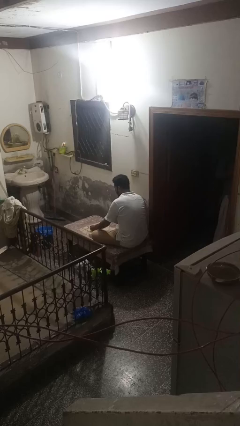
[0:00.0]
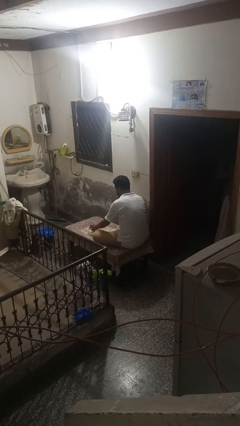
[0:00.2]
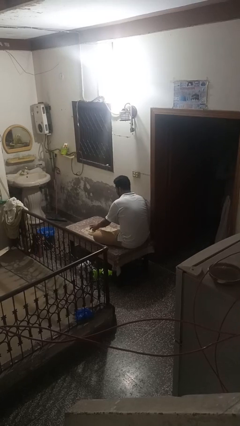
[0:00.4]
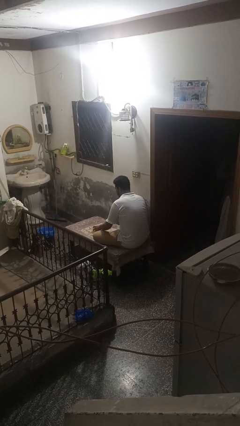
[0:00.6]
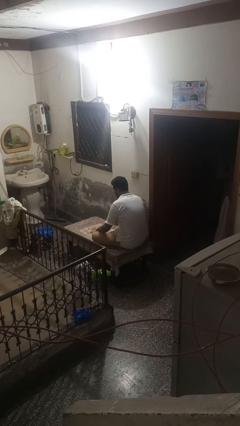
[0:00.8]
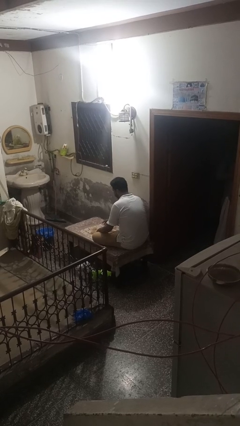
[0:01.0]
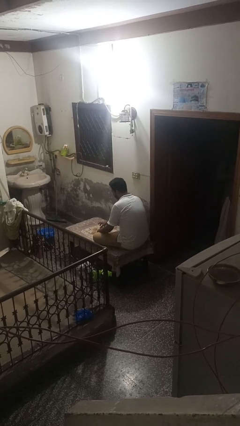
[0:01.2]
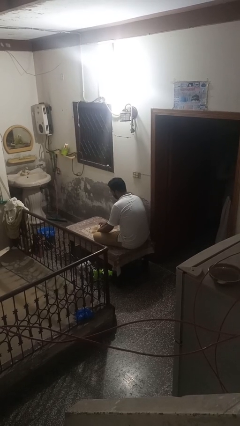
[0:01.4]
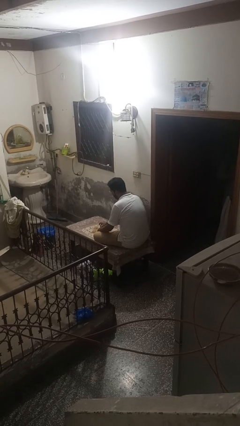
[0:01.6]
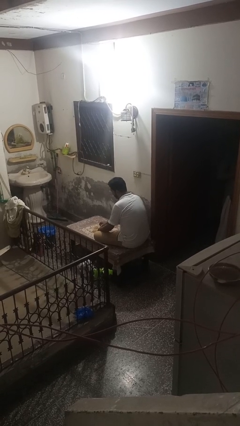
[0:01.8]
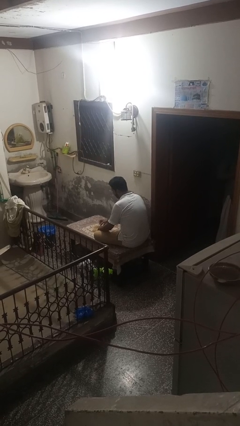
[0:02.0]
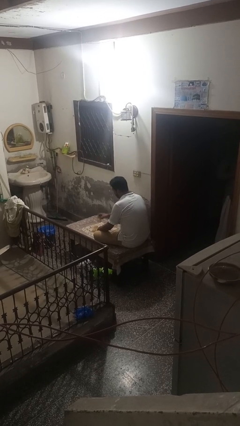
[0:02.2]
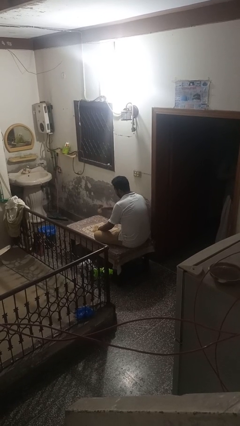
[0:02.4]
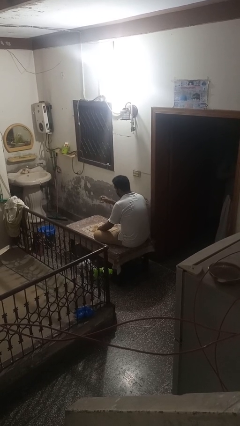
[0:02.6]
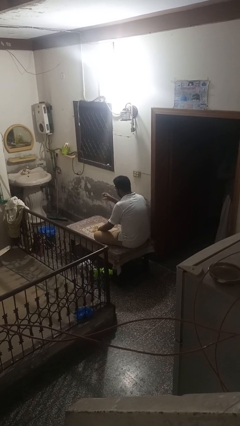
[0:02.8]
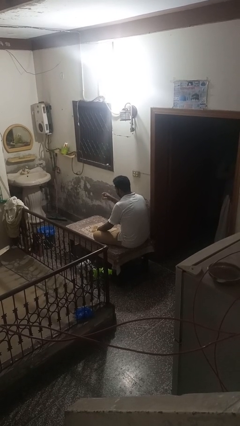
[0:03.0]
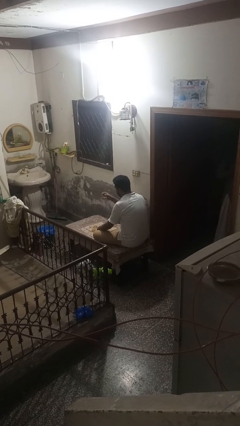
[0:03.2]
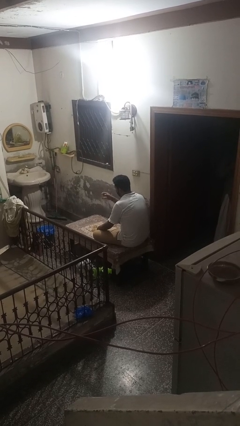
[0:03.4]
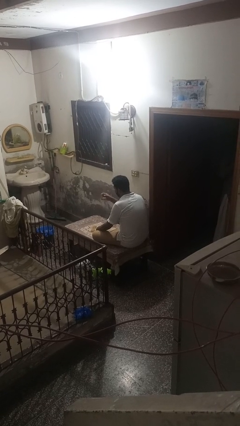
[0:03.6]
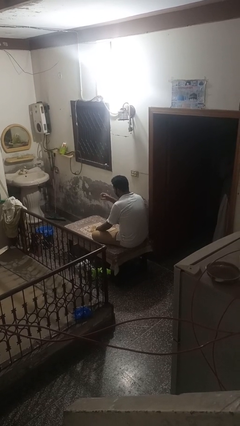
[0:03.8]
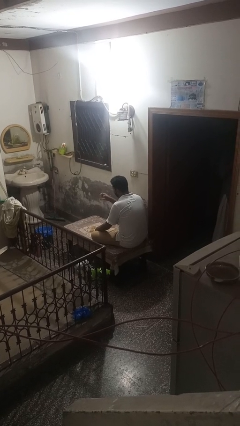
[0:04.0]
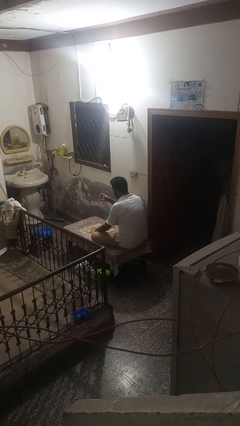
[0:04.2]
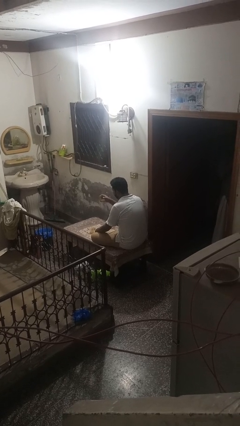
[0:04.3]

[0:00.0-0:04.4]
person picks up object from table

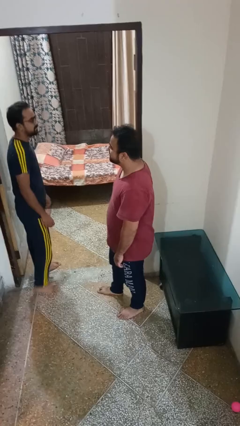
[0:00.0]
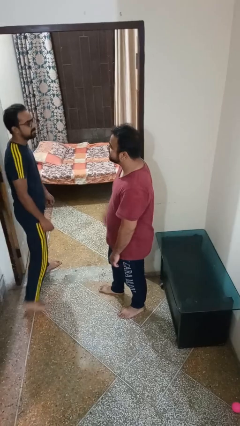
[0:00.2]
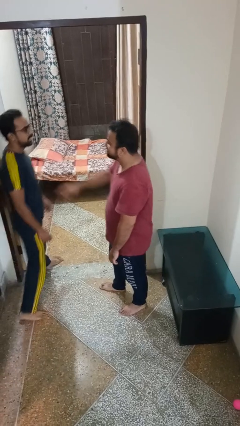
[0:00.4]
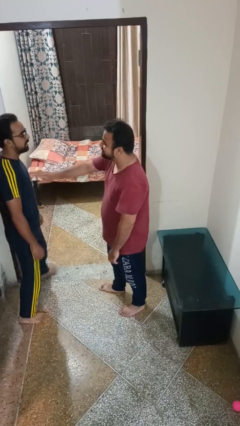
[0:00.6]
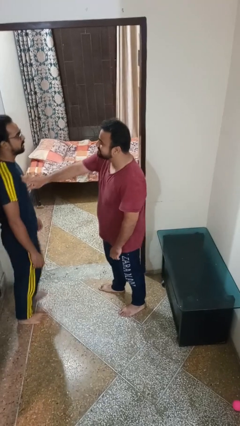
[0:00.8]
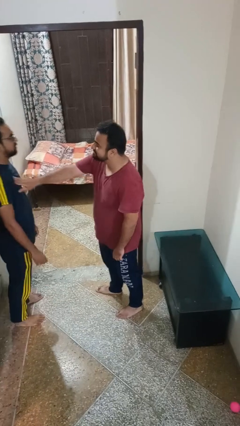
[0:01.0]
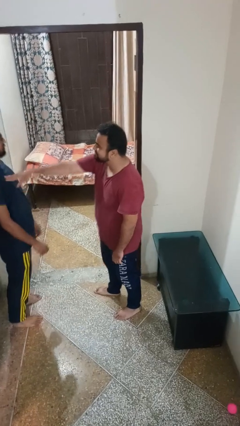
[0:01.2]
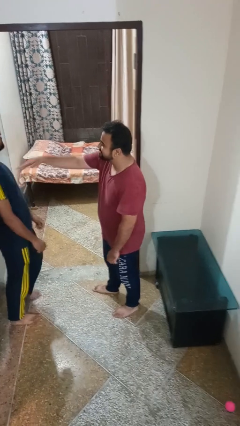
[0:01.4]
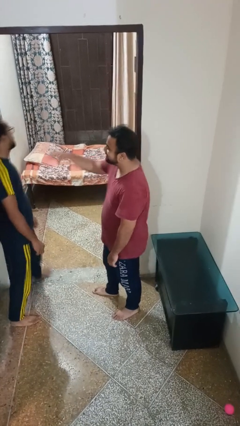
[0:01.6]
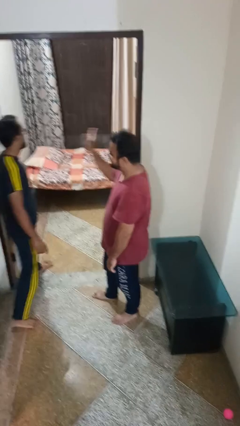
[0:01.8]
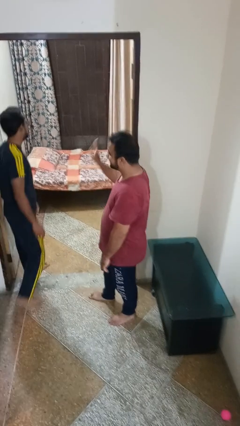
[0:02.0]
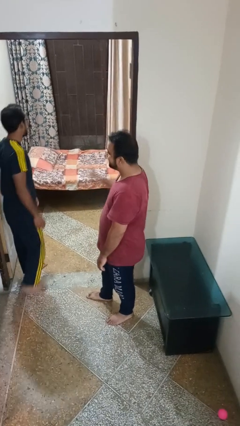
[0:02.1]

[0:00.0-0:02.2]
person shoves person

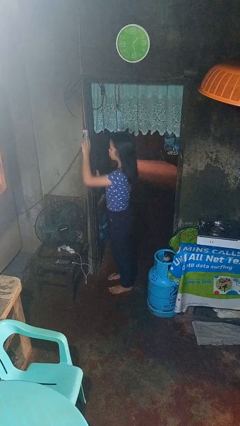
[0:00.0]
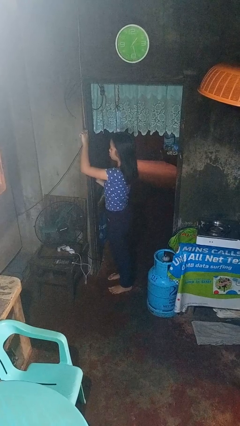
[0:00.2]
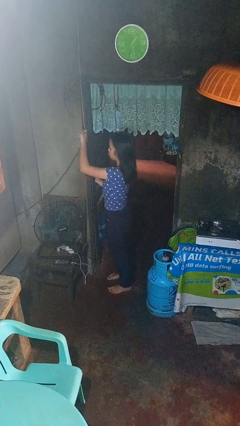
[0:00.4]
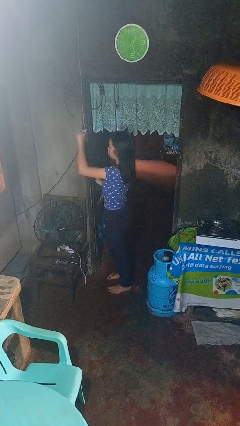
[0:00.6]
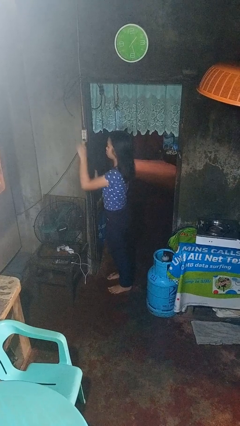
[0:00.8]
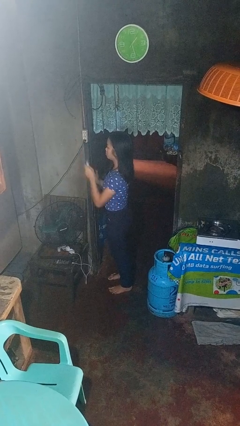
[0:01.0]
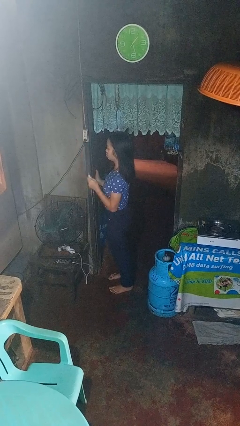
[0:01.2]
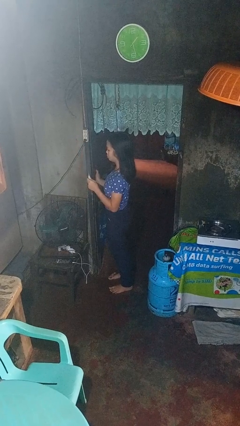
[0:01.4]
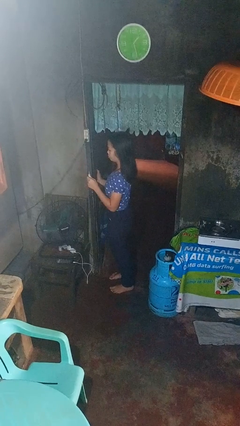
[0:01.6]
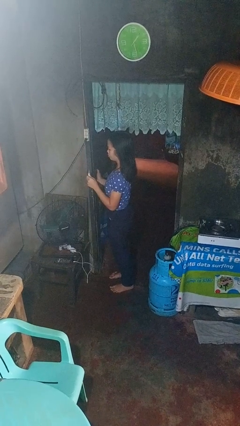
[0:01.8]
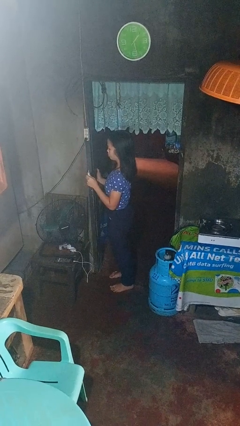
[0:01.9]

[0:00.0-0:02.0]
person unplugs from electrical socket

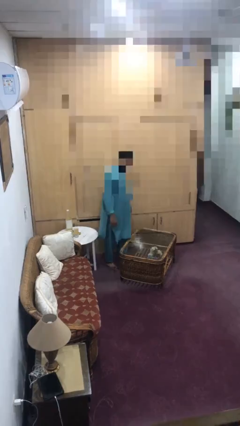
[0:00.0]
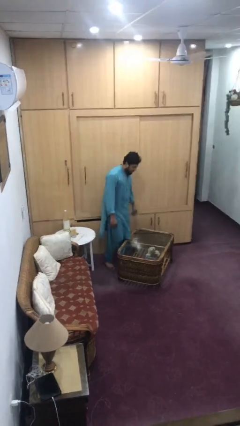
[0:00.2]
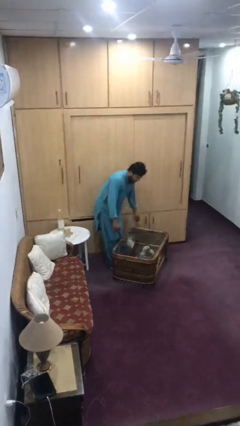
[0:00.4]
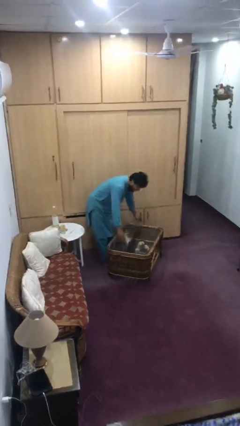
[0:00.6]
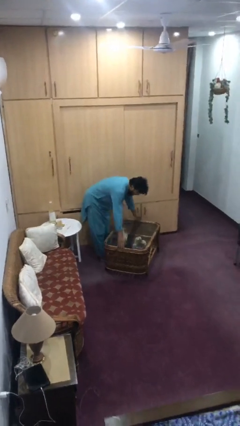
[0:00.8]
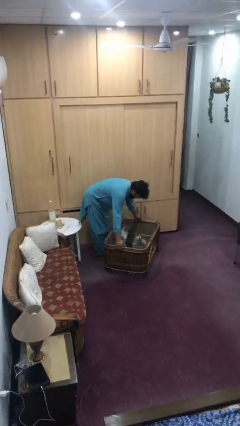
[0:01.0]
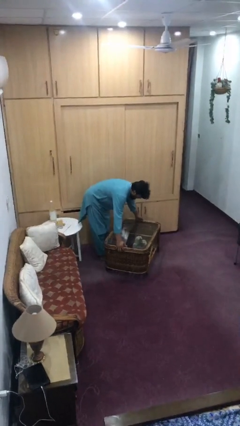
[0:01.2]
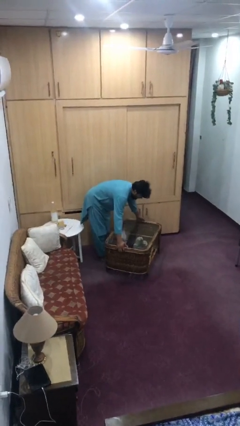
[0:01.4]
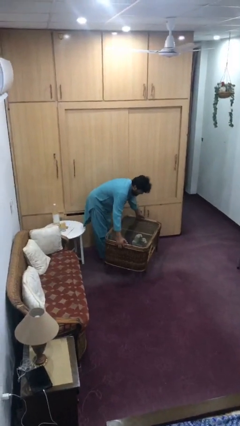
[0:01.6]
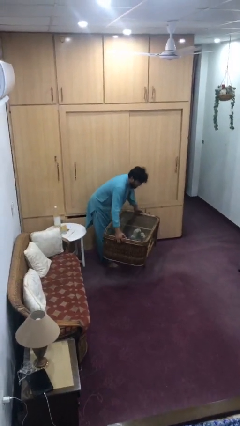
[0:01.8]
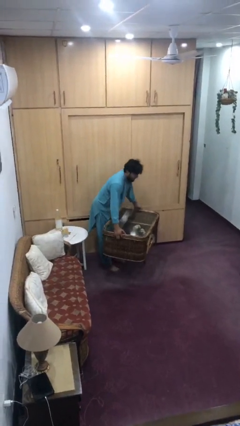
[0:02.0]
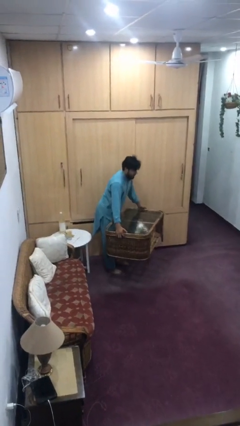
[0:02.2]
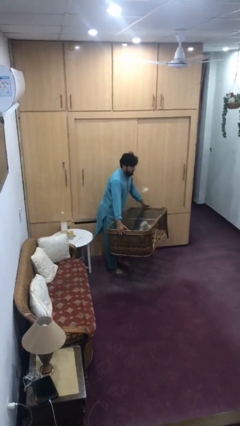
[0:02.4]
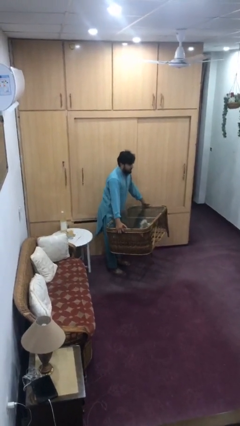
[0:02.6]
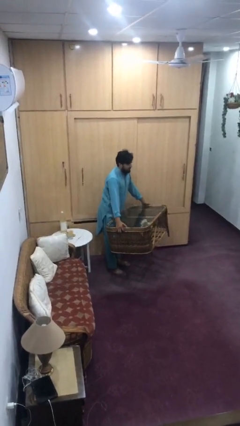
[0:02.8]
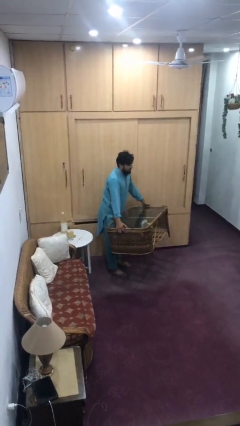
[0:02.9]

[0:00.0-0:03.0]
person picks up object from floor

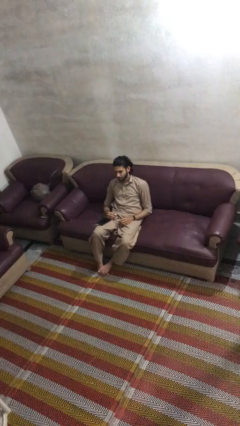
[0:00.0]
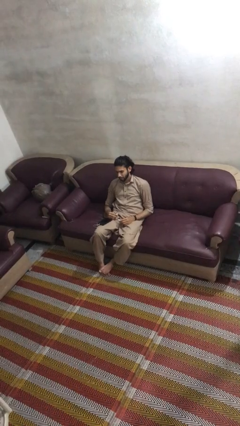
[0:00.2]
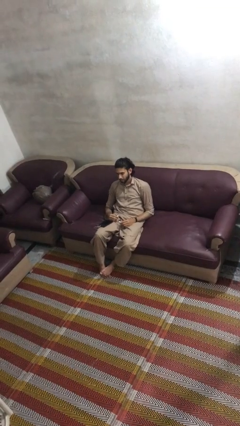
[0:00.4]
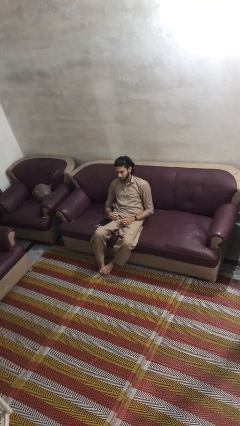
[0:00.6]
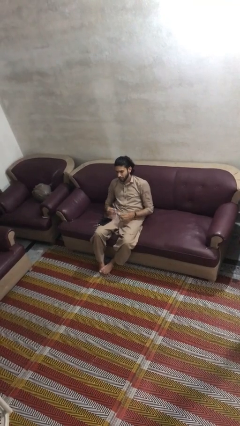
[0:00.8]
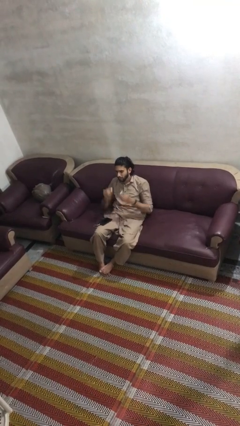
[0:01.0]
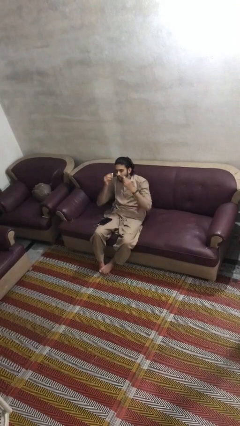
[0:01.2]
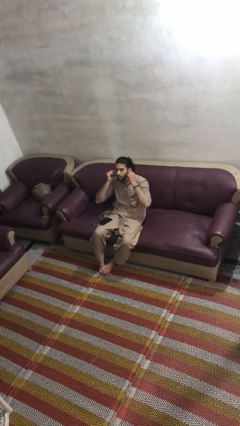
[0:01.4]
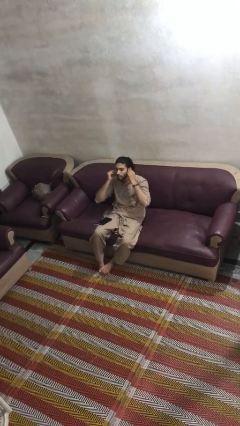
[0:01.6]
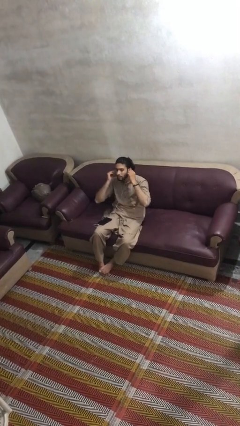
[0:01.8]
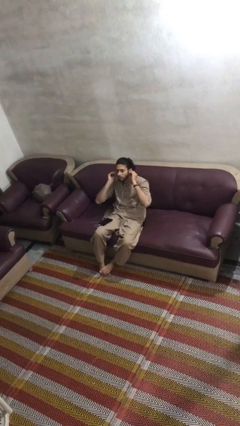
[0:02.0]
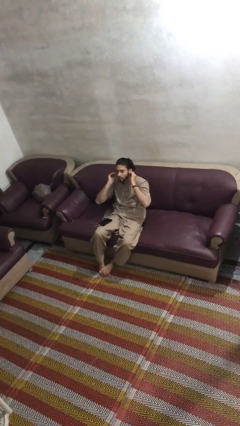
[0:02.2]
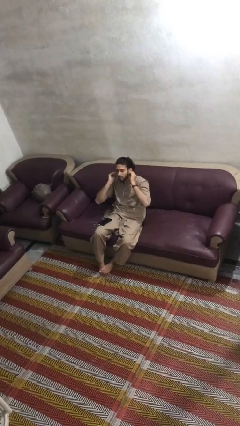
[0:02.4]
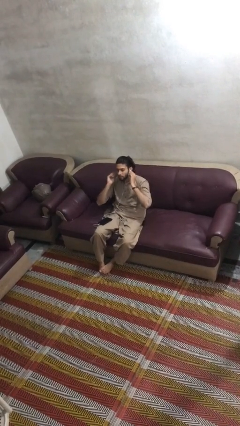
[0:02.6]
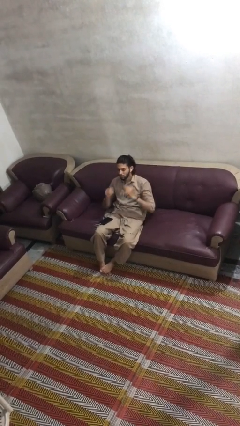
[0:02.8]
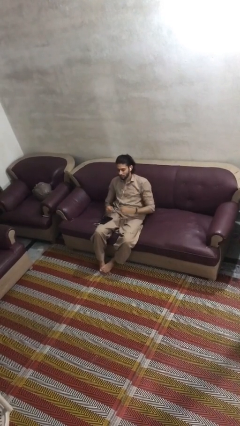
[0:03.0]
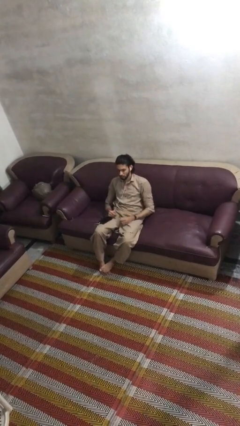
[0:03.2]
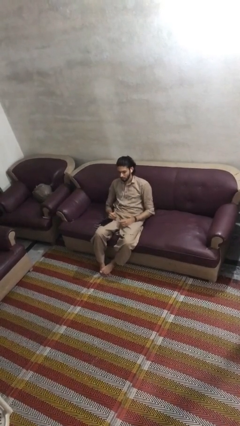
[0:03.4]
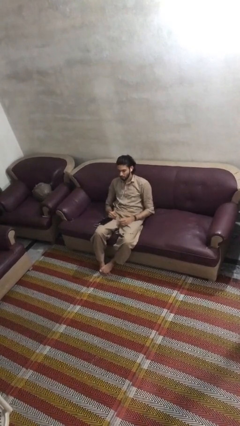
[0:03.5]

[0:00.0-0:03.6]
person puts on headphones

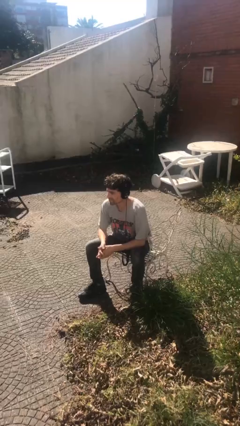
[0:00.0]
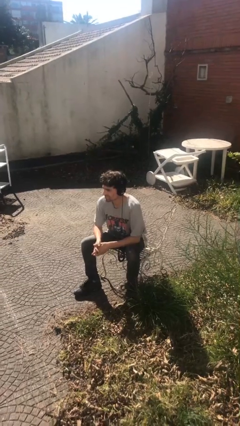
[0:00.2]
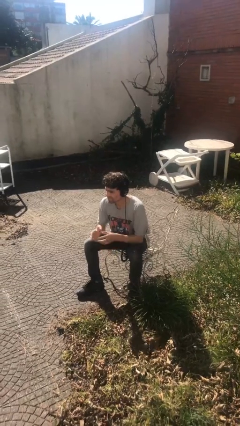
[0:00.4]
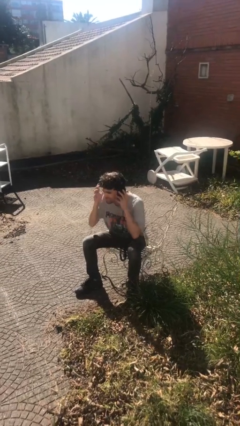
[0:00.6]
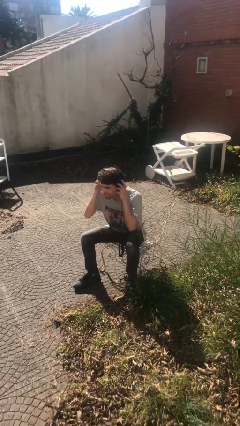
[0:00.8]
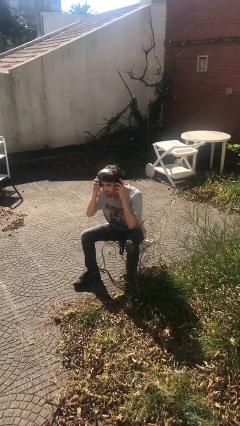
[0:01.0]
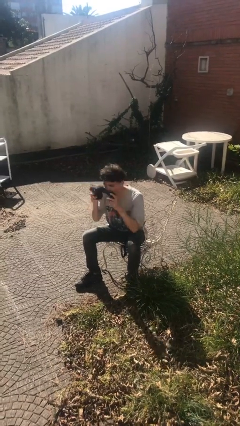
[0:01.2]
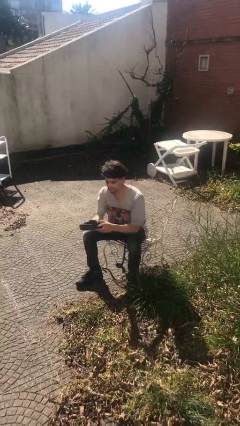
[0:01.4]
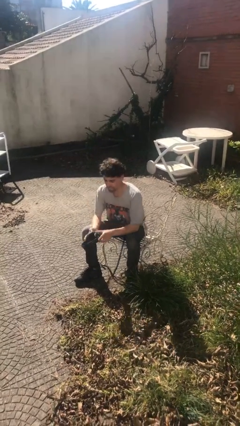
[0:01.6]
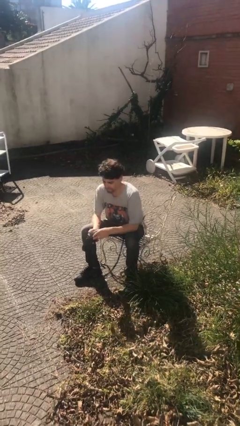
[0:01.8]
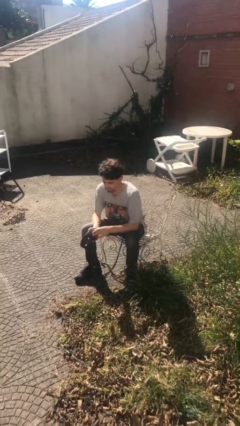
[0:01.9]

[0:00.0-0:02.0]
person takes off headphones

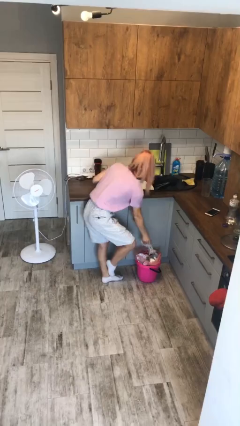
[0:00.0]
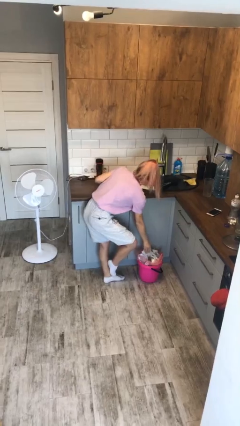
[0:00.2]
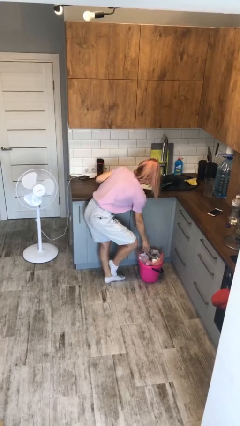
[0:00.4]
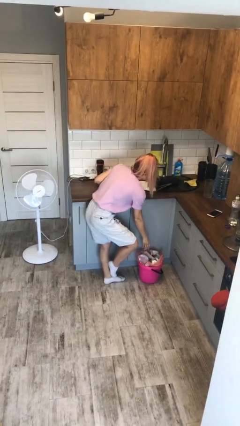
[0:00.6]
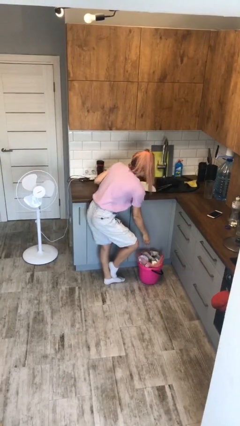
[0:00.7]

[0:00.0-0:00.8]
person discards trash
